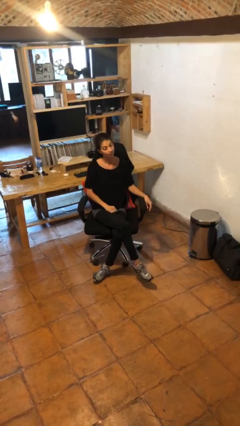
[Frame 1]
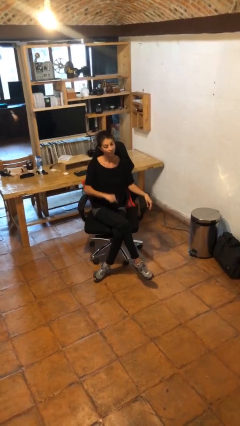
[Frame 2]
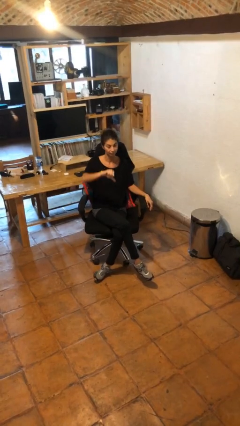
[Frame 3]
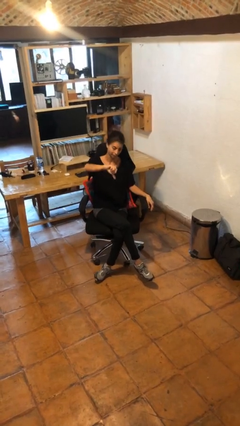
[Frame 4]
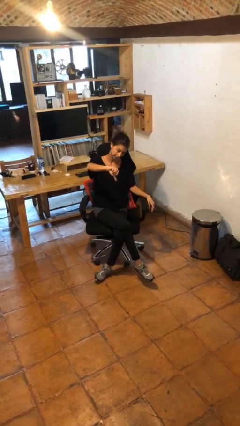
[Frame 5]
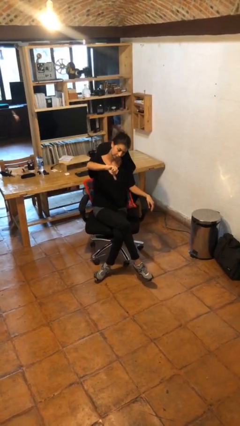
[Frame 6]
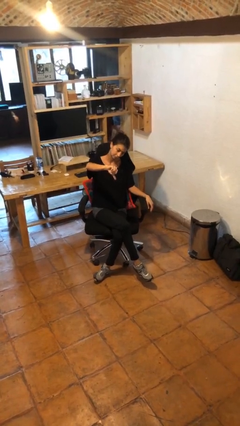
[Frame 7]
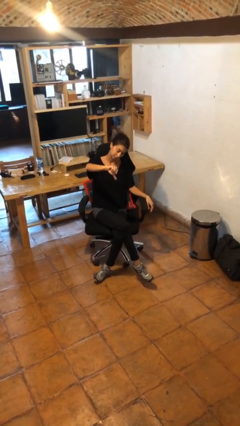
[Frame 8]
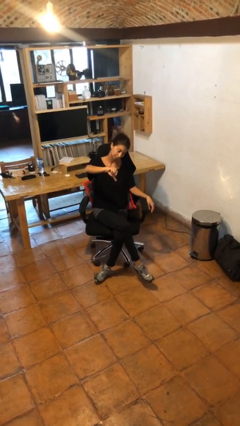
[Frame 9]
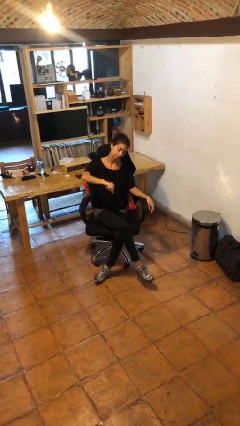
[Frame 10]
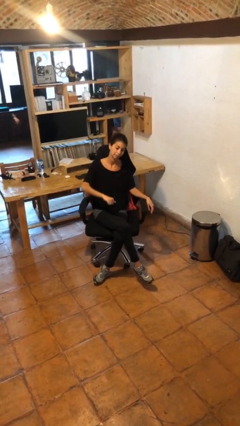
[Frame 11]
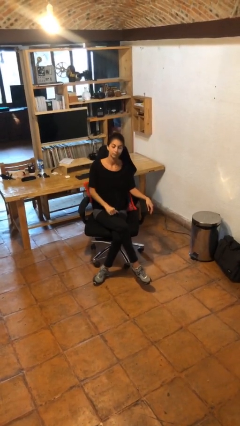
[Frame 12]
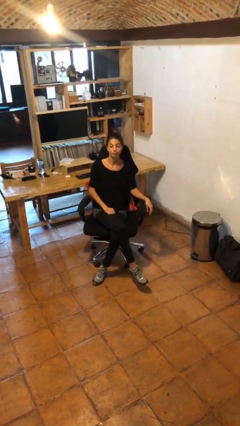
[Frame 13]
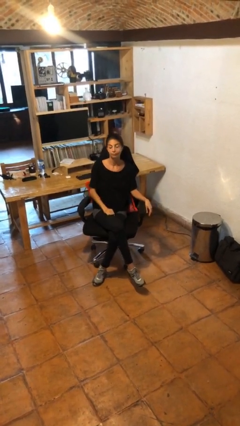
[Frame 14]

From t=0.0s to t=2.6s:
person gestures thumbs down

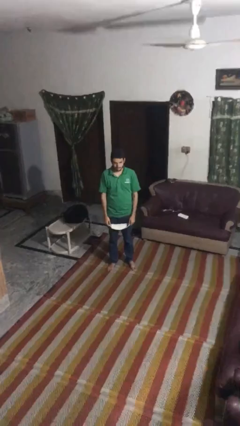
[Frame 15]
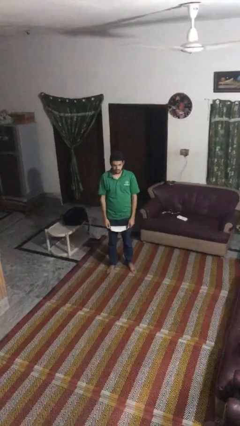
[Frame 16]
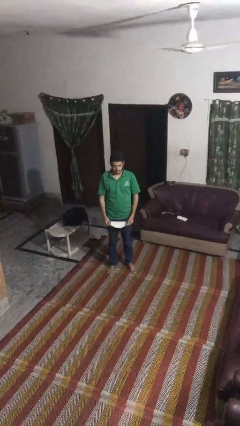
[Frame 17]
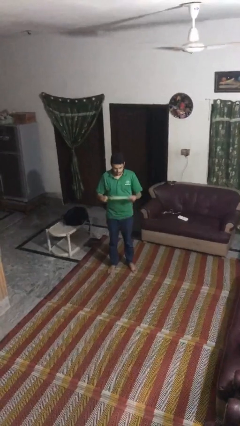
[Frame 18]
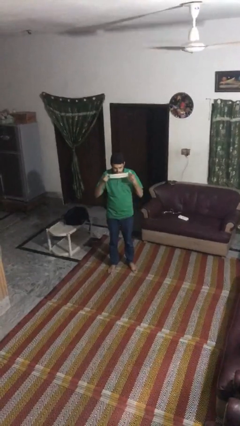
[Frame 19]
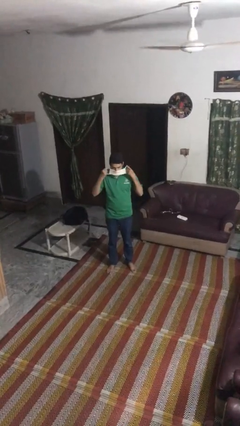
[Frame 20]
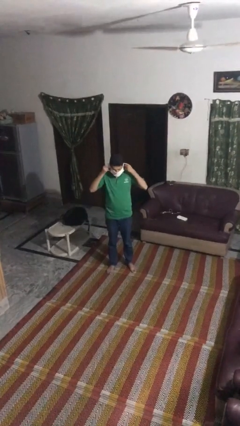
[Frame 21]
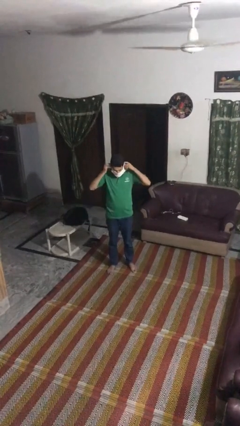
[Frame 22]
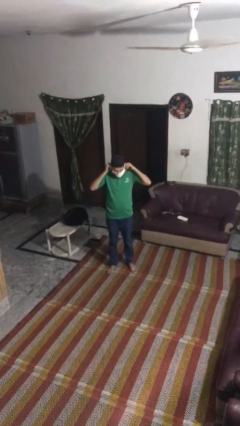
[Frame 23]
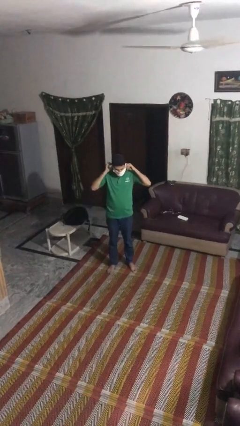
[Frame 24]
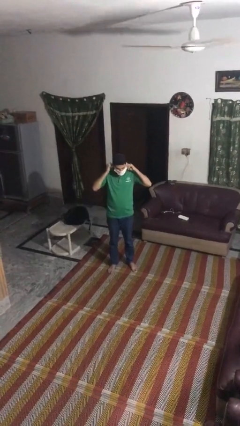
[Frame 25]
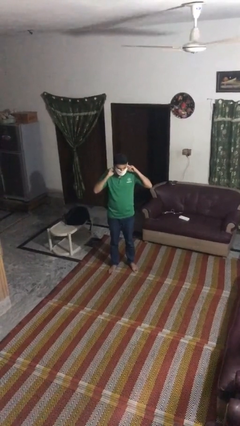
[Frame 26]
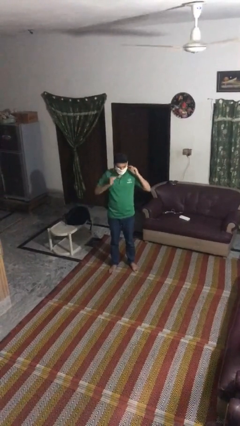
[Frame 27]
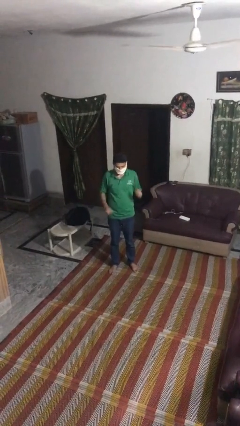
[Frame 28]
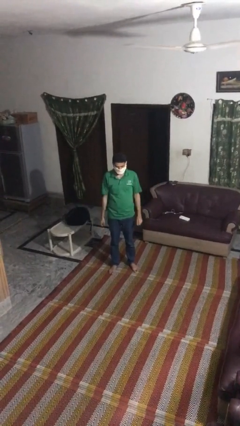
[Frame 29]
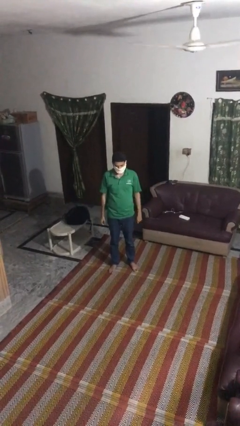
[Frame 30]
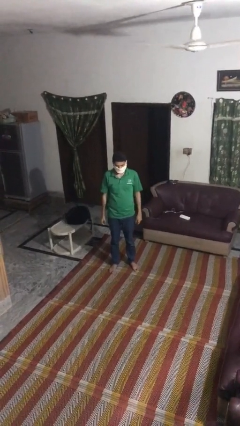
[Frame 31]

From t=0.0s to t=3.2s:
person puts on facemask

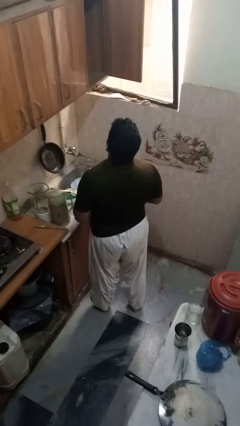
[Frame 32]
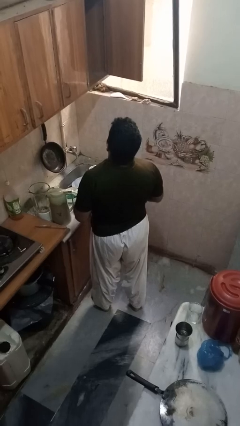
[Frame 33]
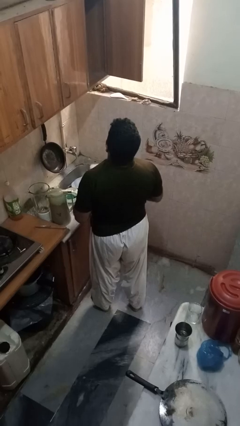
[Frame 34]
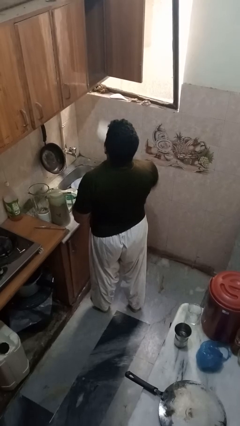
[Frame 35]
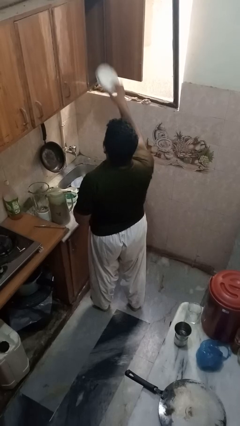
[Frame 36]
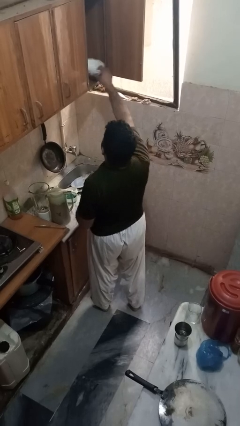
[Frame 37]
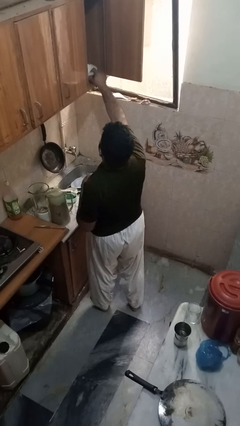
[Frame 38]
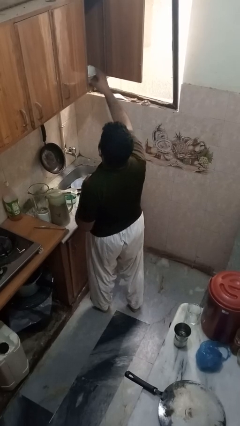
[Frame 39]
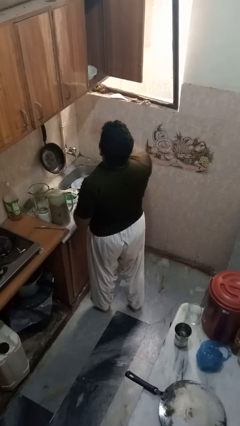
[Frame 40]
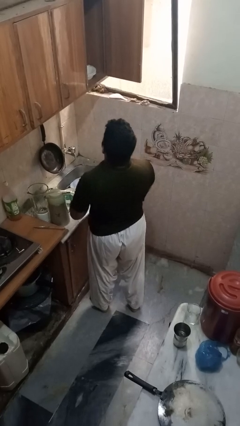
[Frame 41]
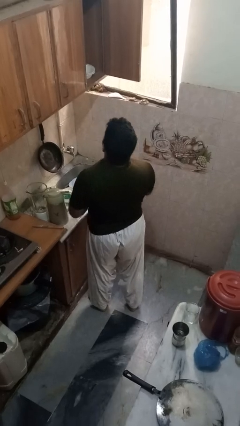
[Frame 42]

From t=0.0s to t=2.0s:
person puts object in cabinet

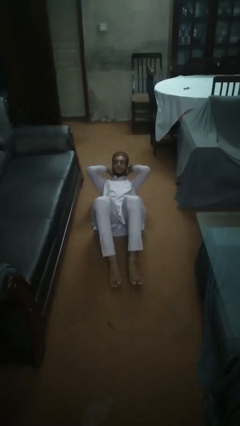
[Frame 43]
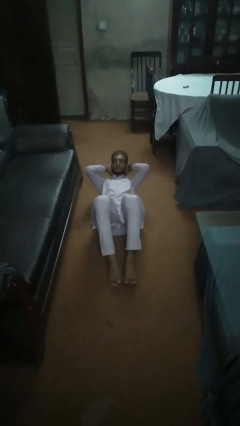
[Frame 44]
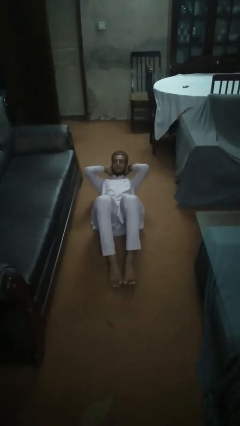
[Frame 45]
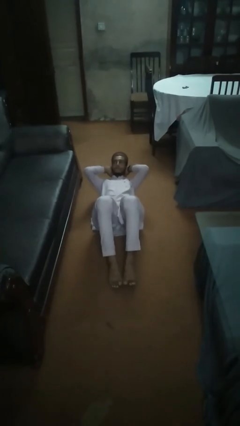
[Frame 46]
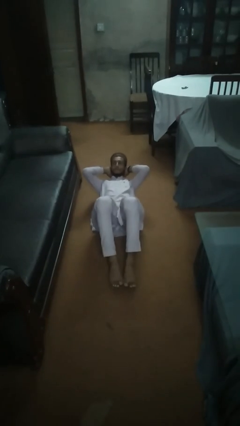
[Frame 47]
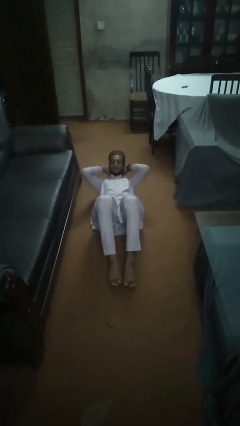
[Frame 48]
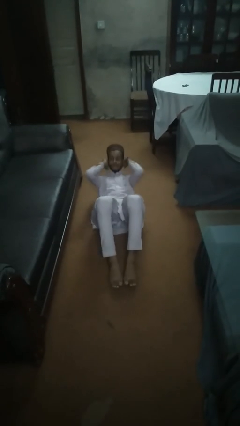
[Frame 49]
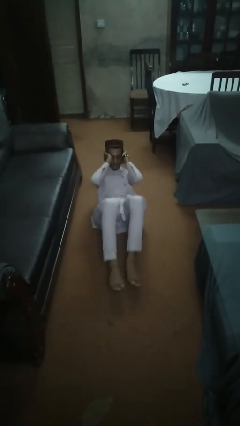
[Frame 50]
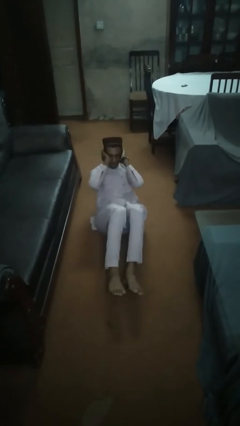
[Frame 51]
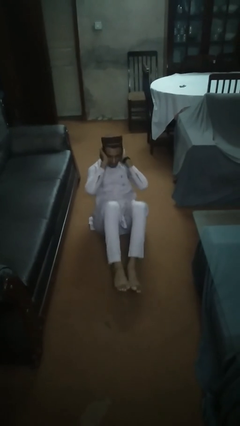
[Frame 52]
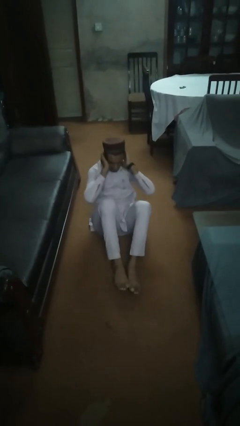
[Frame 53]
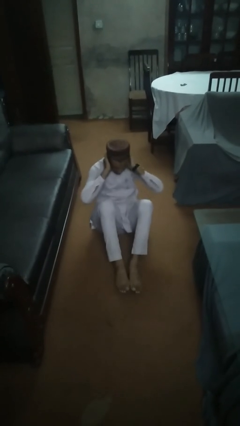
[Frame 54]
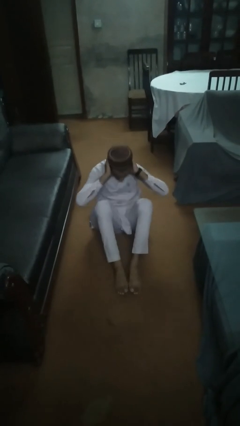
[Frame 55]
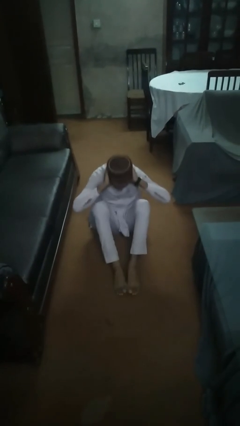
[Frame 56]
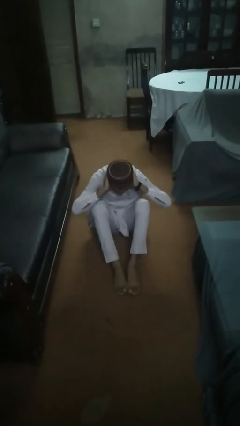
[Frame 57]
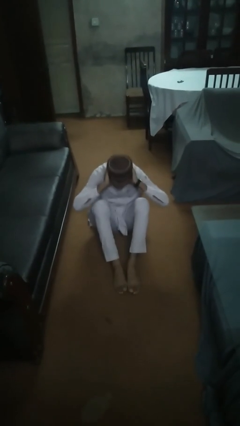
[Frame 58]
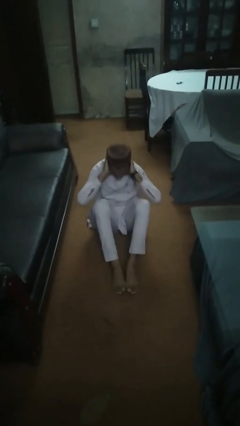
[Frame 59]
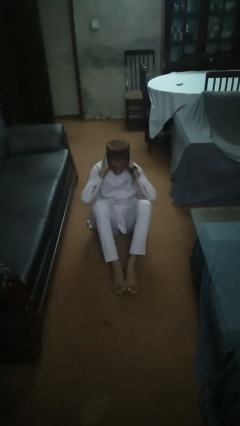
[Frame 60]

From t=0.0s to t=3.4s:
person exercises with situp

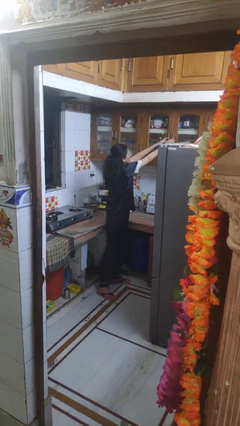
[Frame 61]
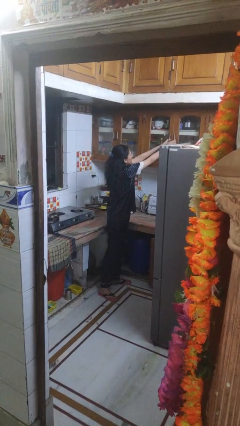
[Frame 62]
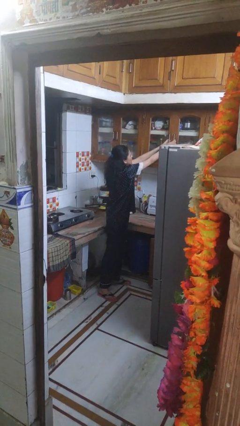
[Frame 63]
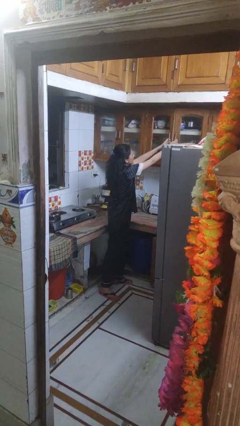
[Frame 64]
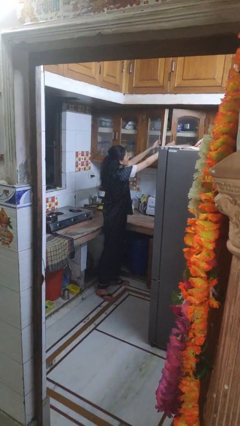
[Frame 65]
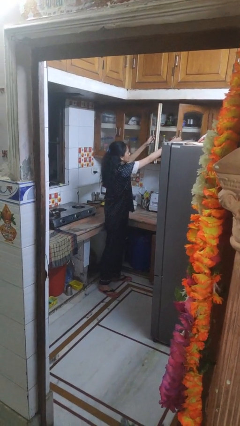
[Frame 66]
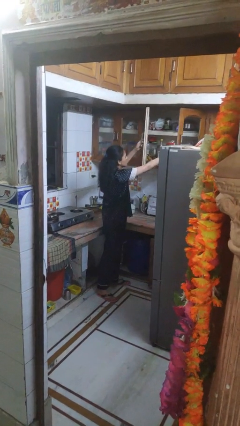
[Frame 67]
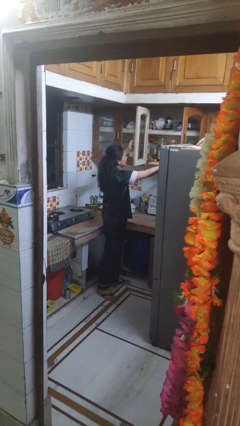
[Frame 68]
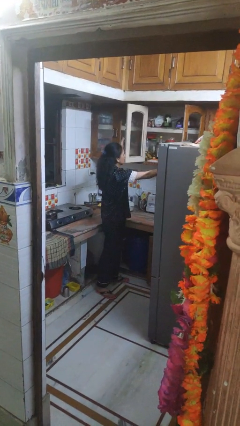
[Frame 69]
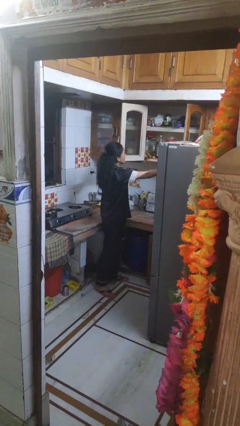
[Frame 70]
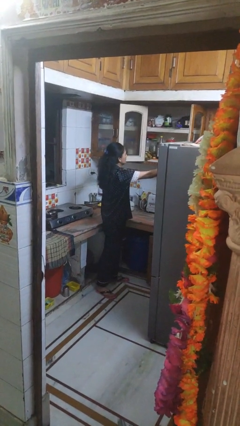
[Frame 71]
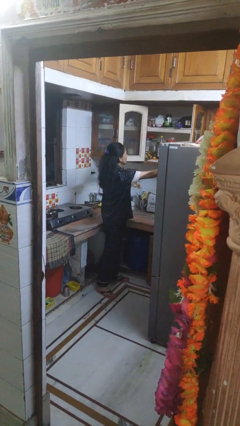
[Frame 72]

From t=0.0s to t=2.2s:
person opens cabinet

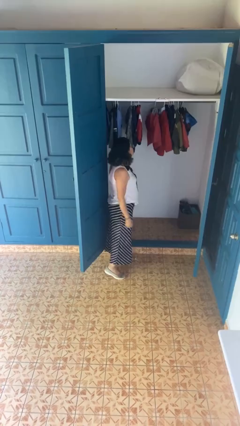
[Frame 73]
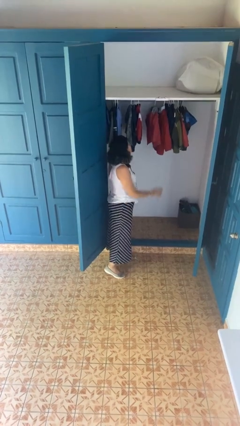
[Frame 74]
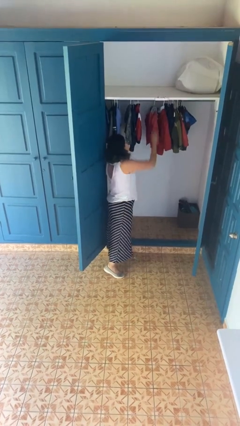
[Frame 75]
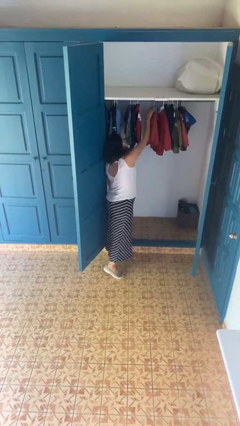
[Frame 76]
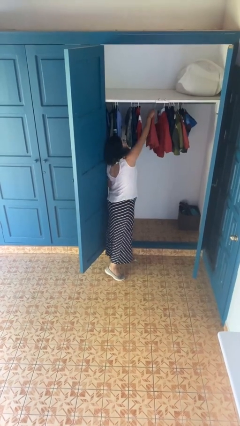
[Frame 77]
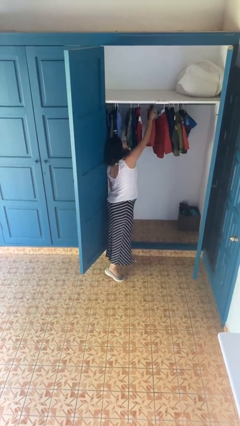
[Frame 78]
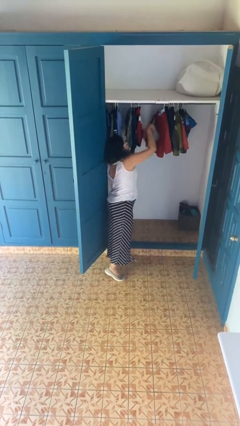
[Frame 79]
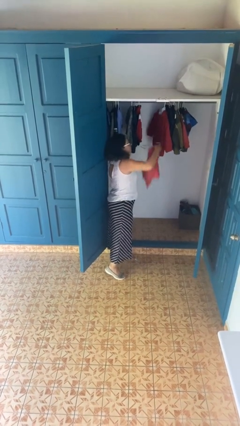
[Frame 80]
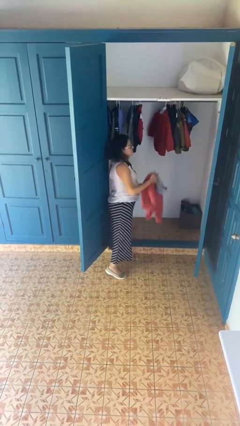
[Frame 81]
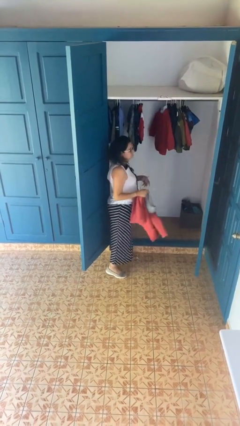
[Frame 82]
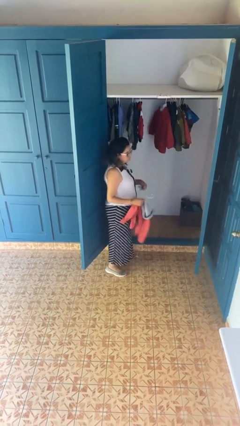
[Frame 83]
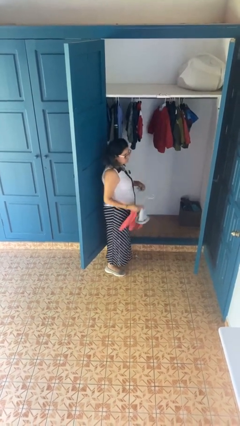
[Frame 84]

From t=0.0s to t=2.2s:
person takes clothes from closet

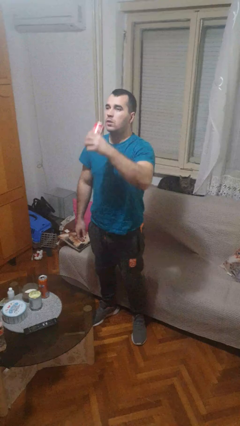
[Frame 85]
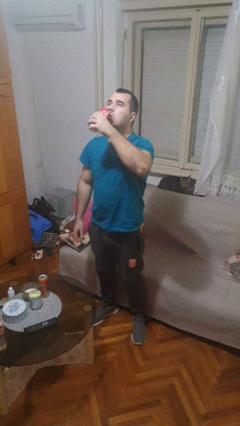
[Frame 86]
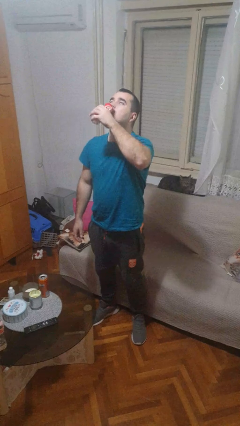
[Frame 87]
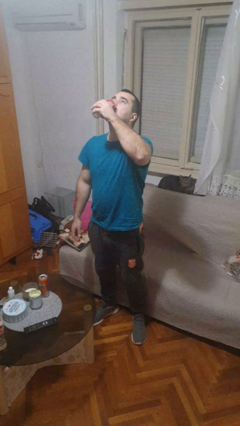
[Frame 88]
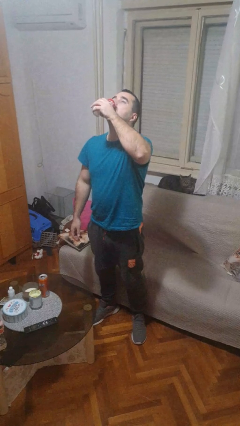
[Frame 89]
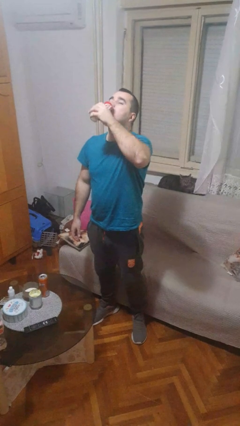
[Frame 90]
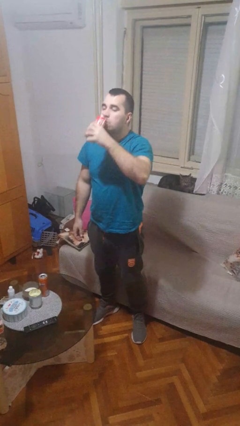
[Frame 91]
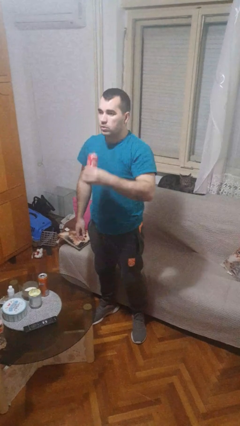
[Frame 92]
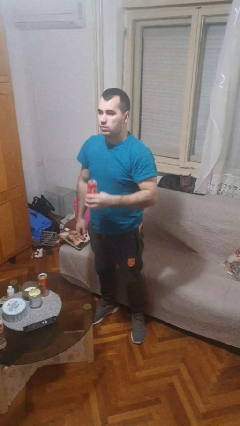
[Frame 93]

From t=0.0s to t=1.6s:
person drinks from beverage can
